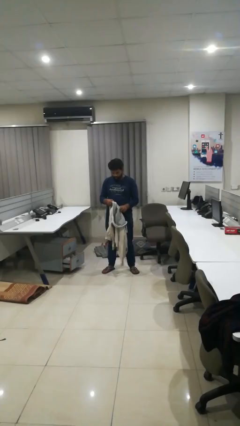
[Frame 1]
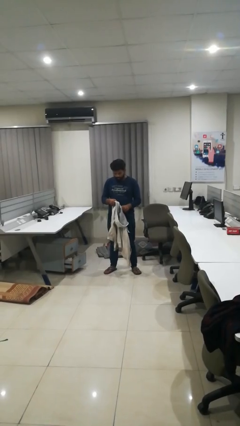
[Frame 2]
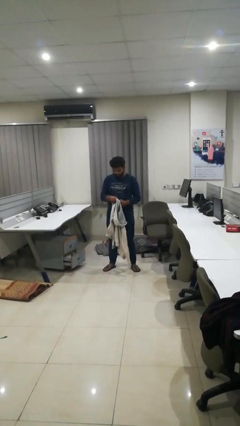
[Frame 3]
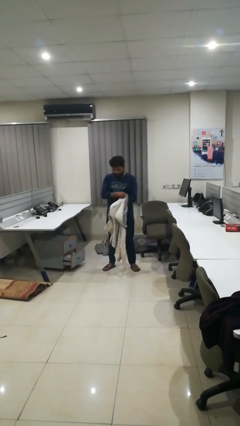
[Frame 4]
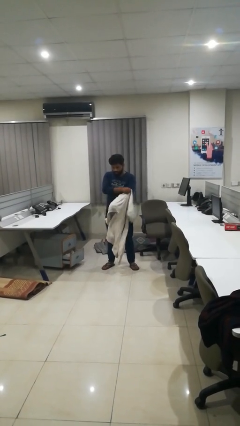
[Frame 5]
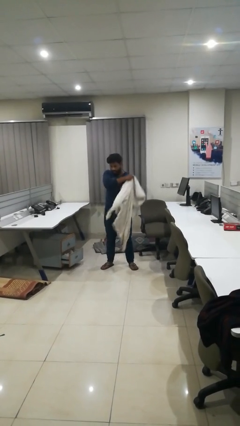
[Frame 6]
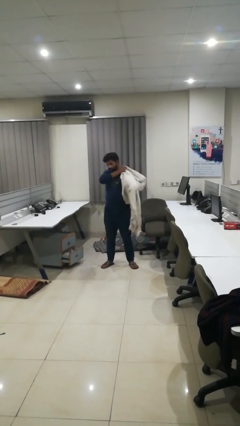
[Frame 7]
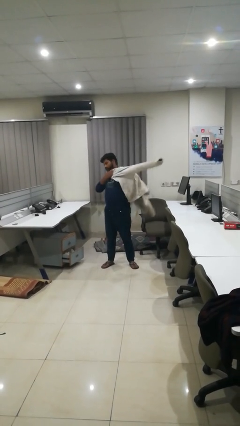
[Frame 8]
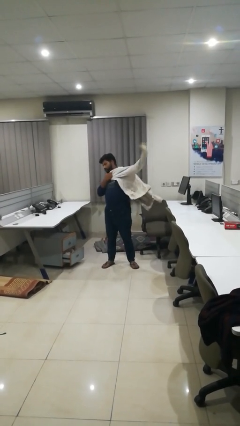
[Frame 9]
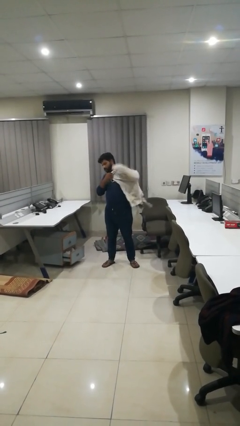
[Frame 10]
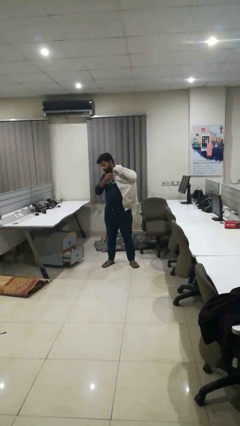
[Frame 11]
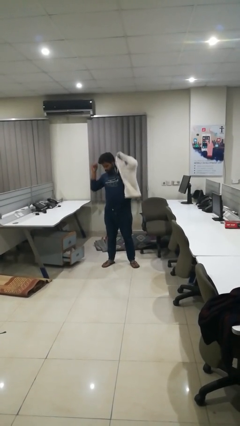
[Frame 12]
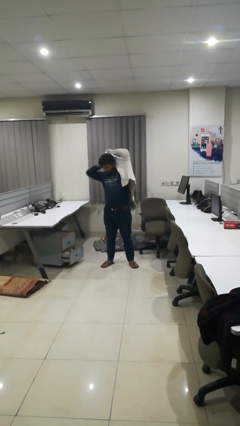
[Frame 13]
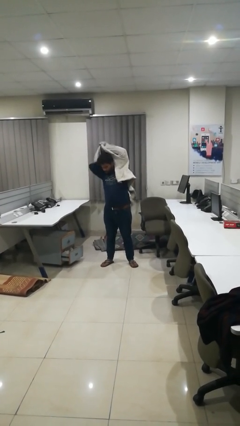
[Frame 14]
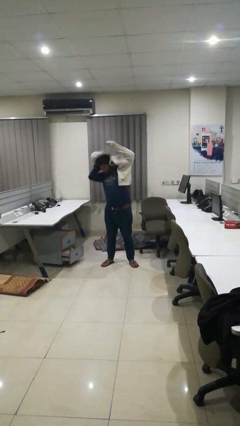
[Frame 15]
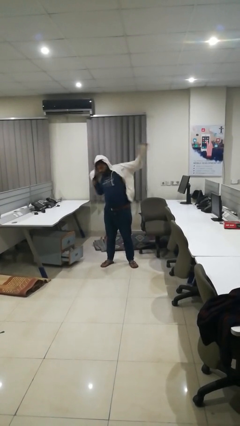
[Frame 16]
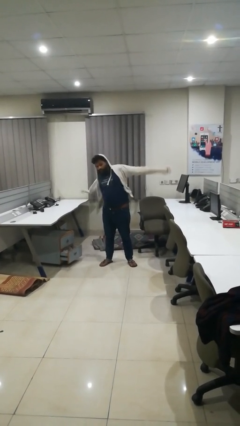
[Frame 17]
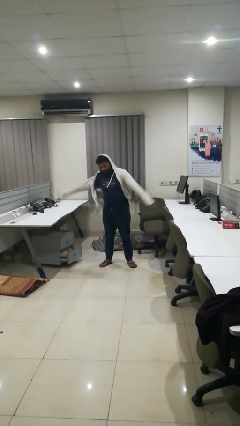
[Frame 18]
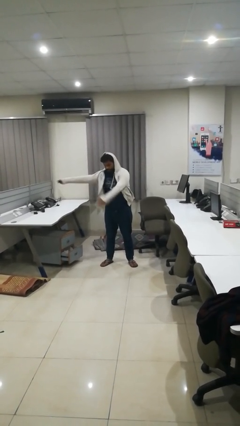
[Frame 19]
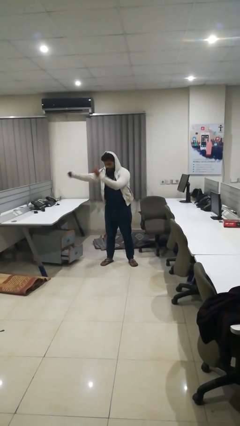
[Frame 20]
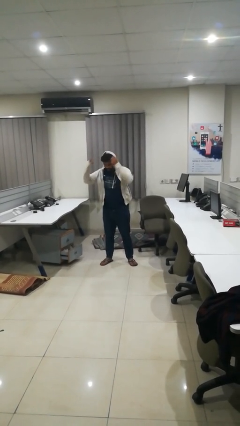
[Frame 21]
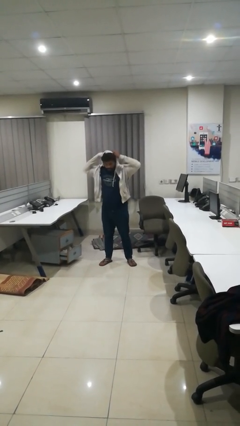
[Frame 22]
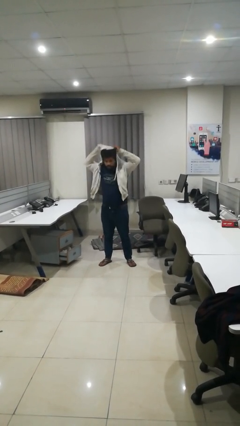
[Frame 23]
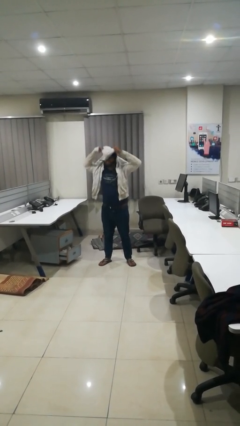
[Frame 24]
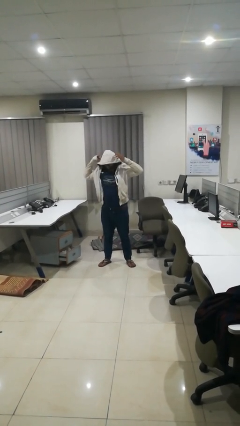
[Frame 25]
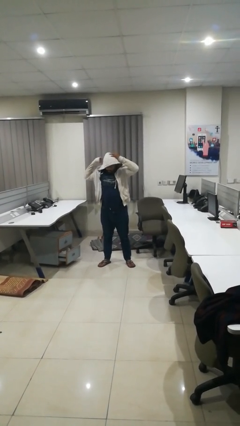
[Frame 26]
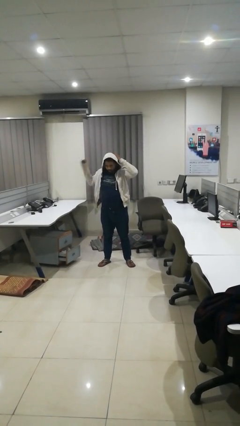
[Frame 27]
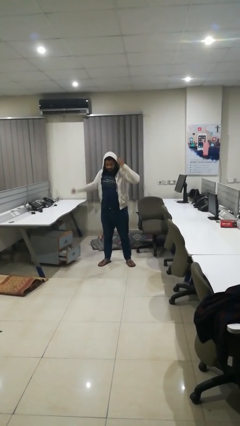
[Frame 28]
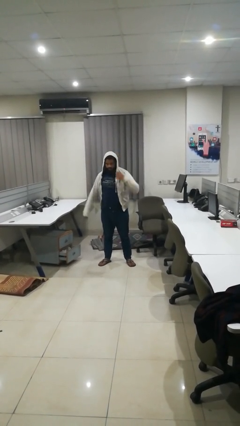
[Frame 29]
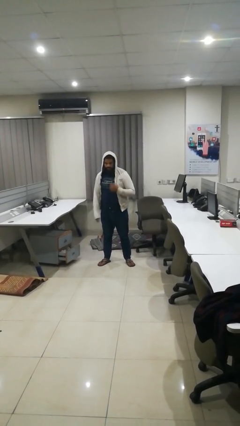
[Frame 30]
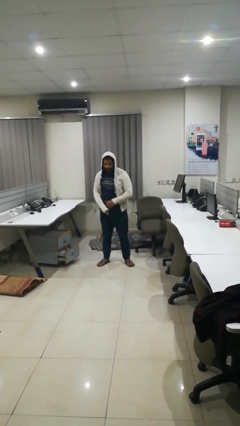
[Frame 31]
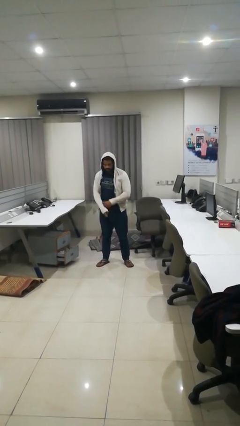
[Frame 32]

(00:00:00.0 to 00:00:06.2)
person puts on hoodie

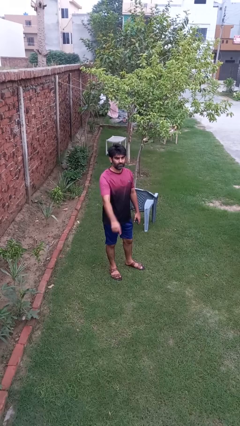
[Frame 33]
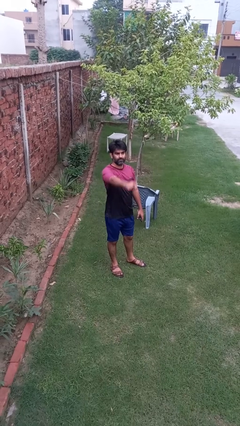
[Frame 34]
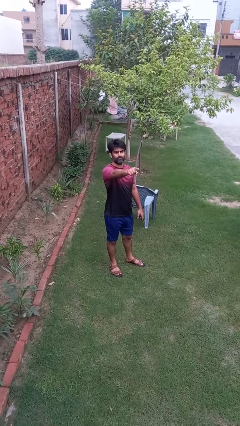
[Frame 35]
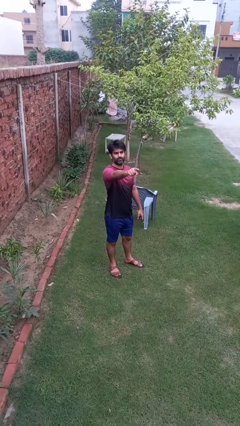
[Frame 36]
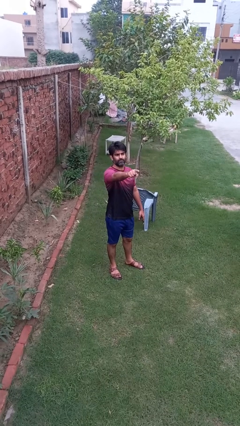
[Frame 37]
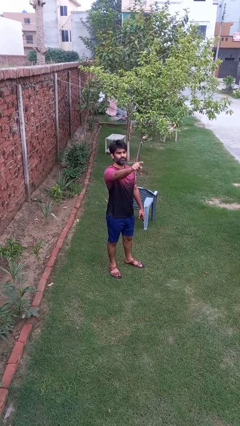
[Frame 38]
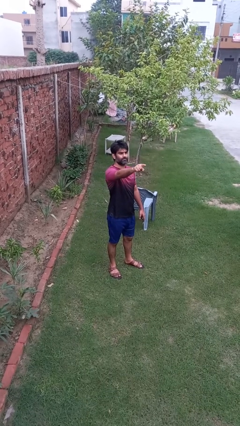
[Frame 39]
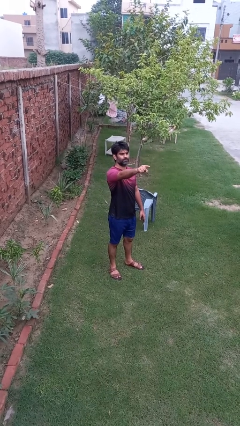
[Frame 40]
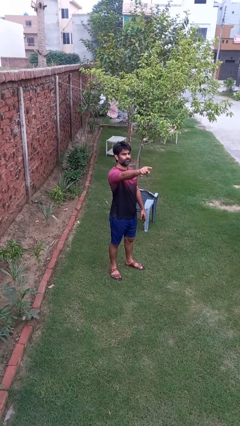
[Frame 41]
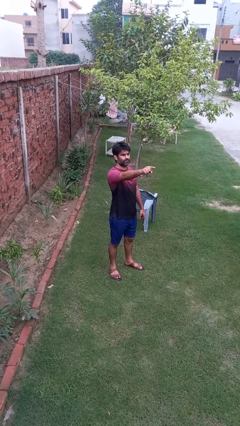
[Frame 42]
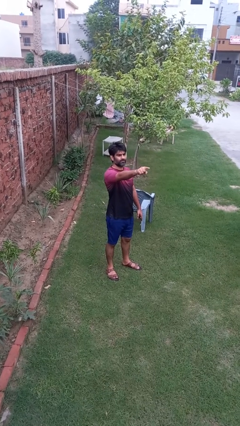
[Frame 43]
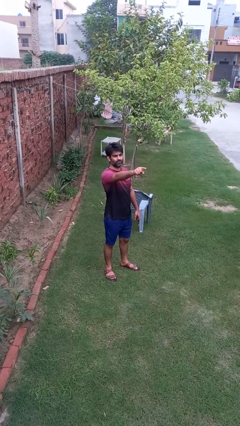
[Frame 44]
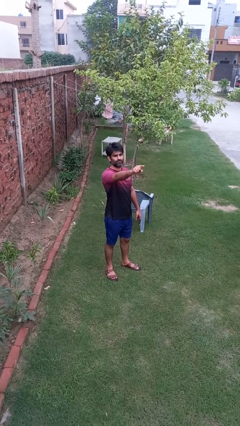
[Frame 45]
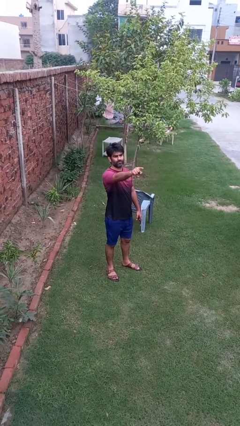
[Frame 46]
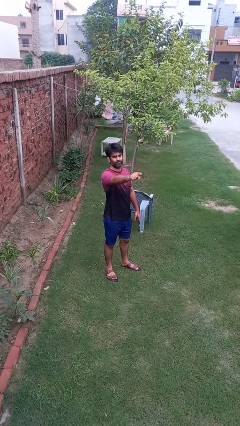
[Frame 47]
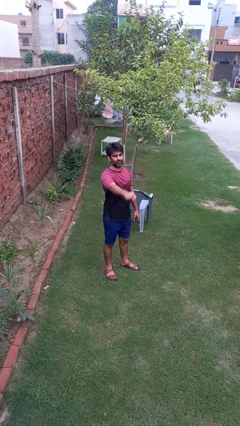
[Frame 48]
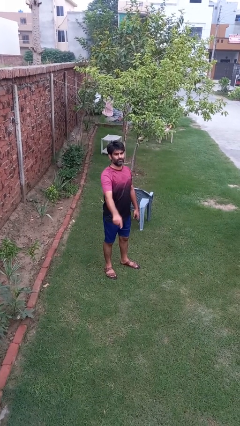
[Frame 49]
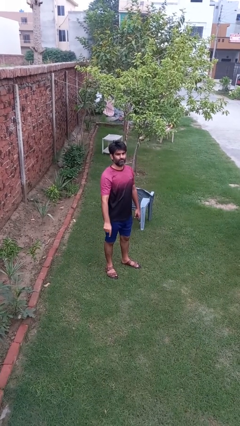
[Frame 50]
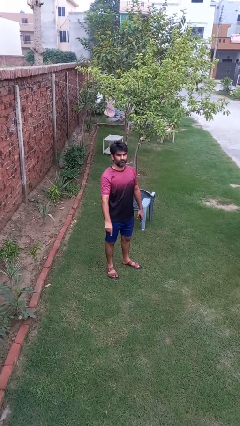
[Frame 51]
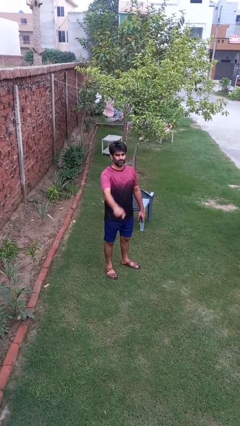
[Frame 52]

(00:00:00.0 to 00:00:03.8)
person points at person

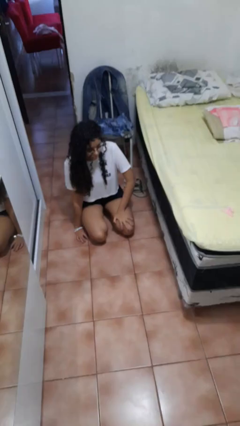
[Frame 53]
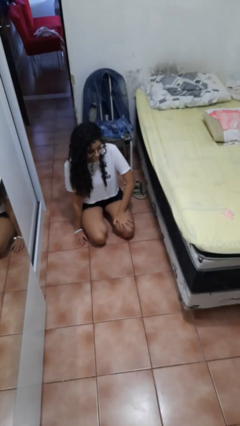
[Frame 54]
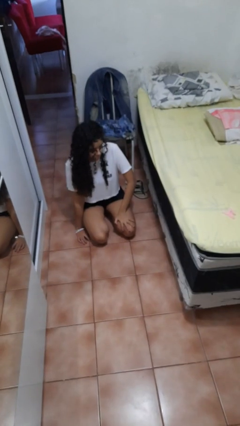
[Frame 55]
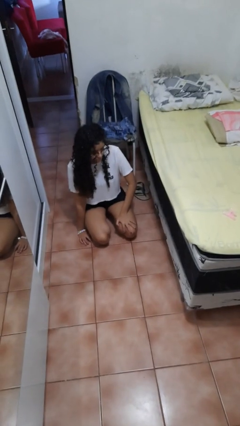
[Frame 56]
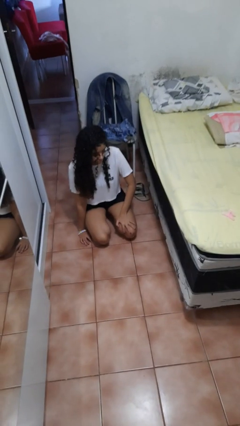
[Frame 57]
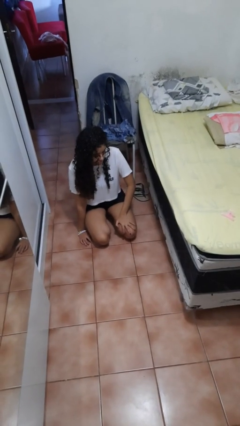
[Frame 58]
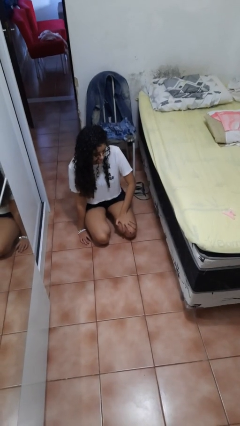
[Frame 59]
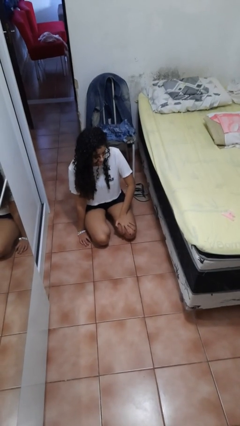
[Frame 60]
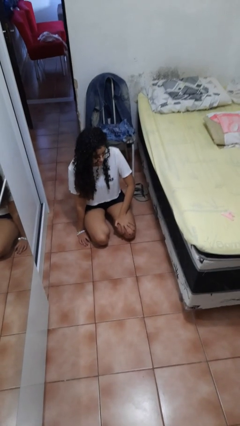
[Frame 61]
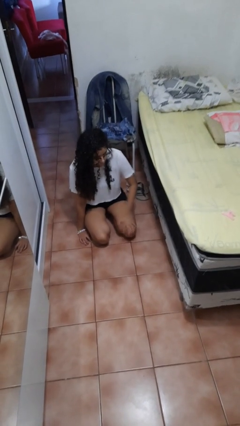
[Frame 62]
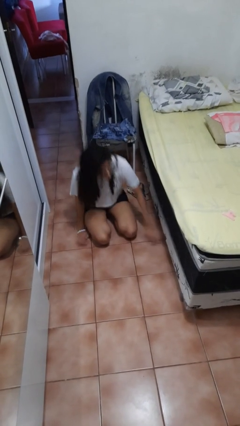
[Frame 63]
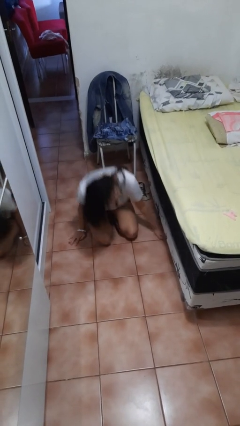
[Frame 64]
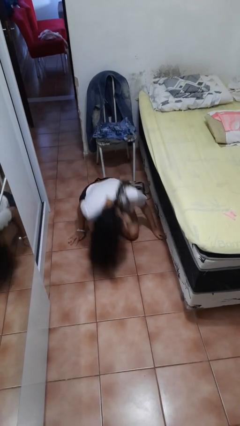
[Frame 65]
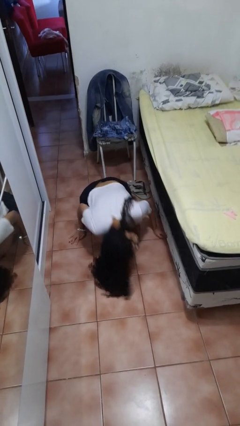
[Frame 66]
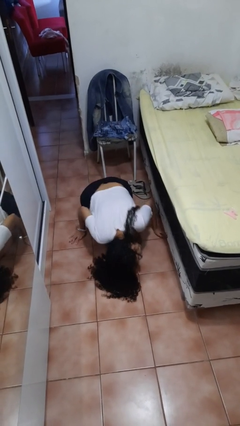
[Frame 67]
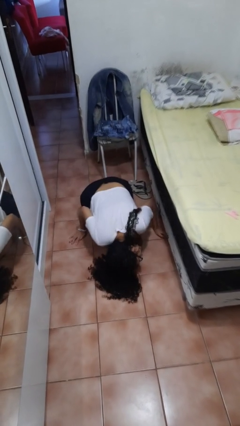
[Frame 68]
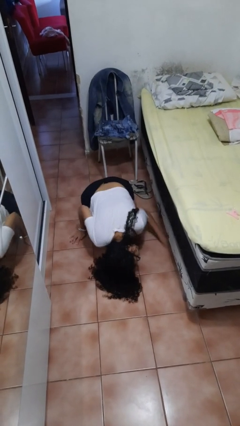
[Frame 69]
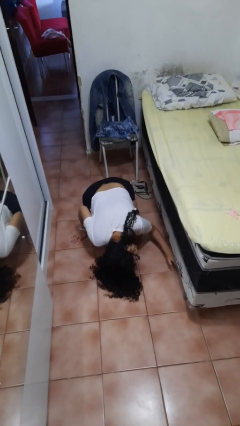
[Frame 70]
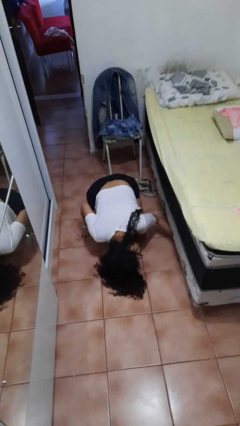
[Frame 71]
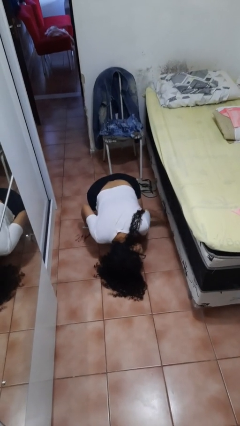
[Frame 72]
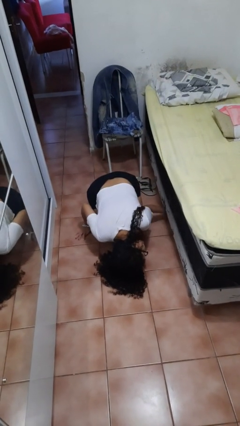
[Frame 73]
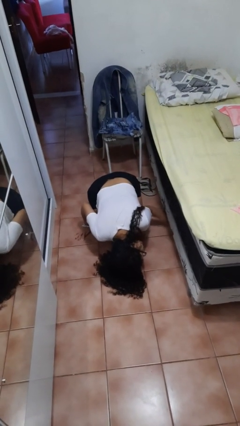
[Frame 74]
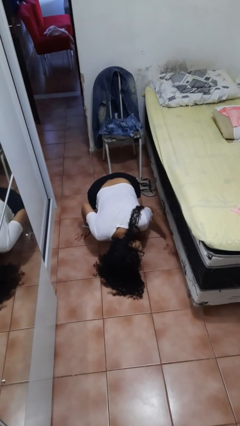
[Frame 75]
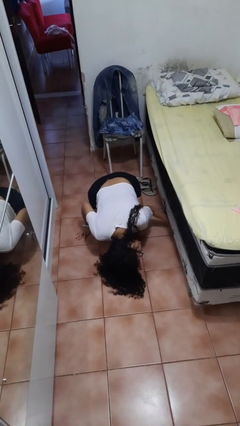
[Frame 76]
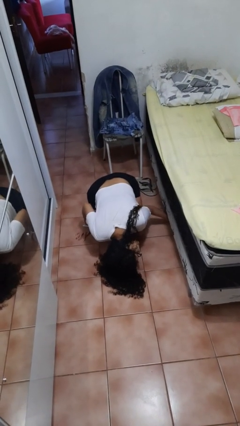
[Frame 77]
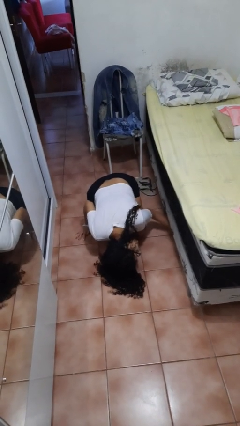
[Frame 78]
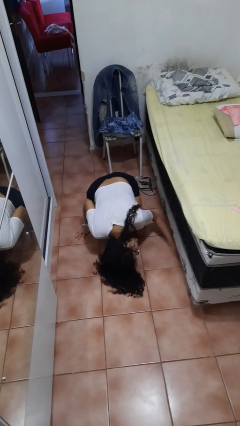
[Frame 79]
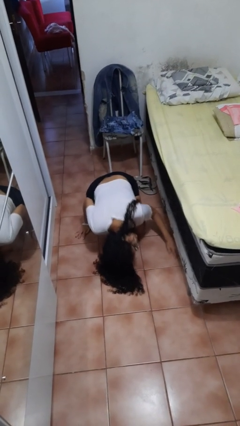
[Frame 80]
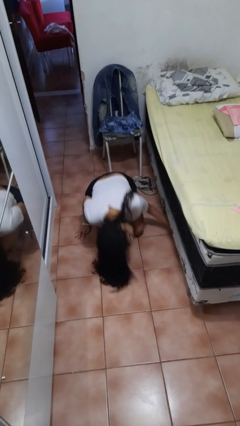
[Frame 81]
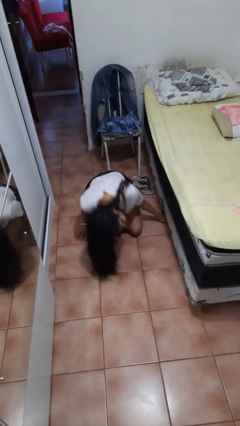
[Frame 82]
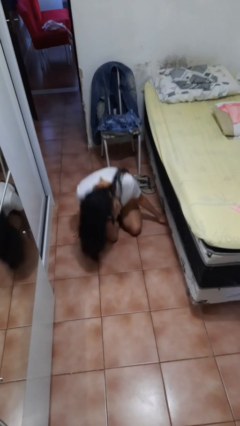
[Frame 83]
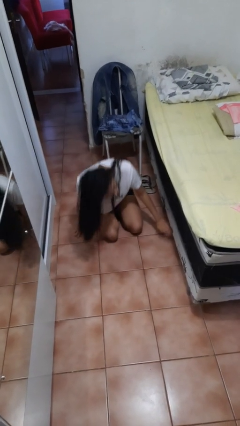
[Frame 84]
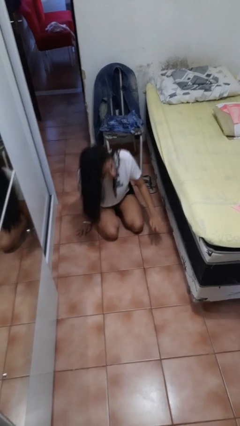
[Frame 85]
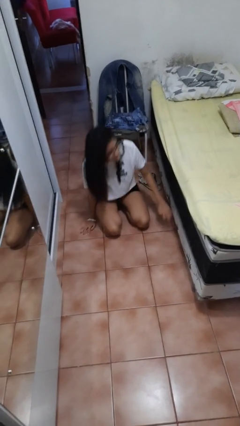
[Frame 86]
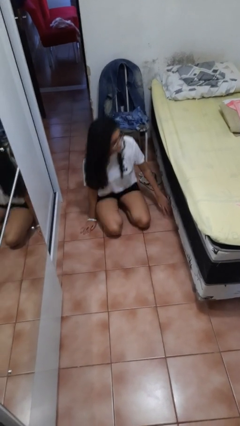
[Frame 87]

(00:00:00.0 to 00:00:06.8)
person searches under bed

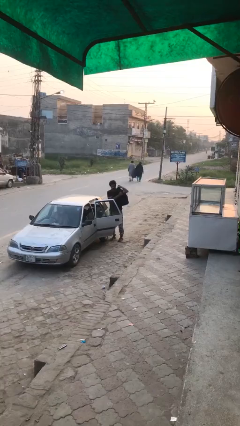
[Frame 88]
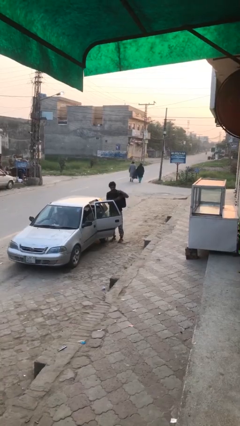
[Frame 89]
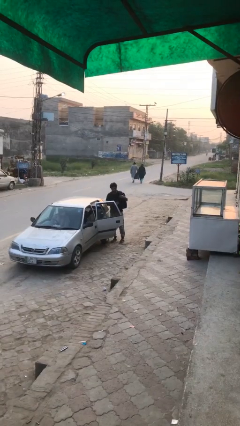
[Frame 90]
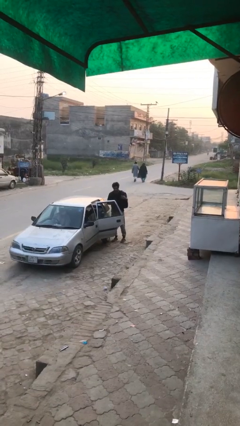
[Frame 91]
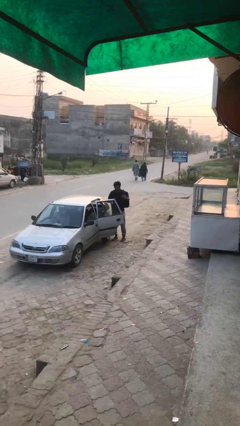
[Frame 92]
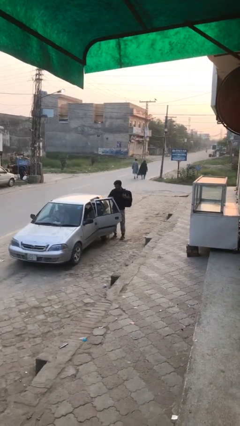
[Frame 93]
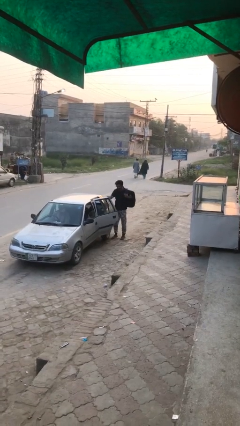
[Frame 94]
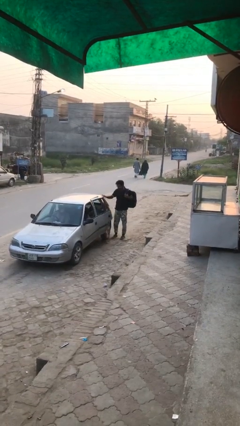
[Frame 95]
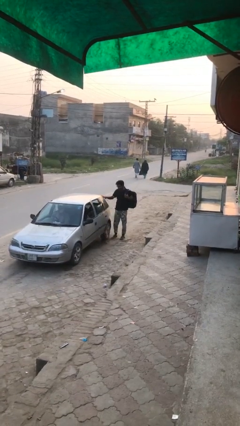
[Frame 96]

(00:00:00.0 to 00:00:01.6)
person closes car door
